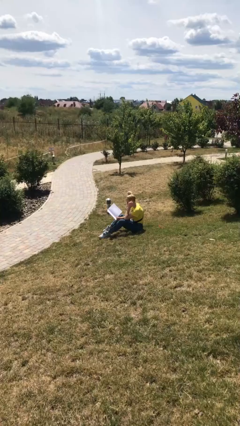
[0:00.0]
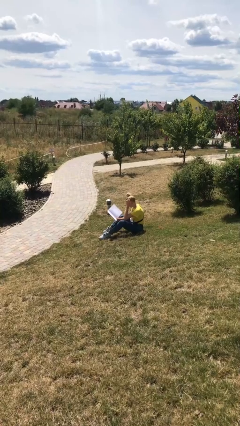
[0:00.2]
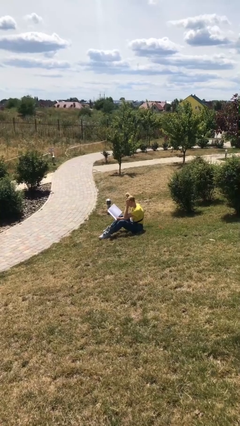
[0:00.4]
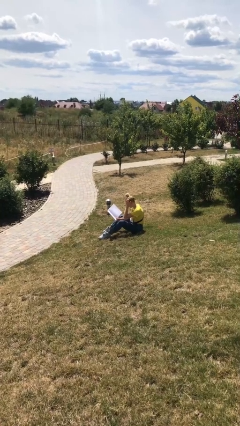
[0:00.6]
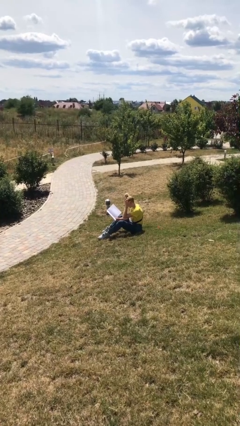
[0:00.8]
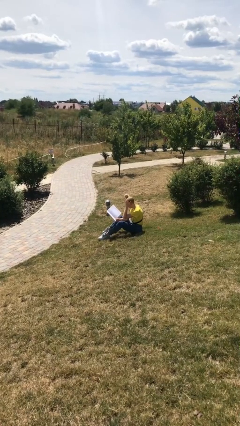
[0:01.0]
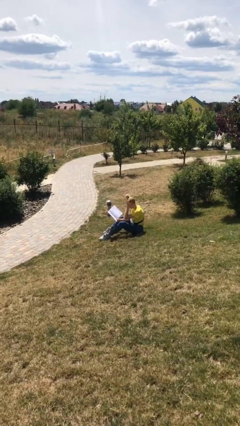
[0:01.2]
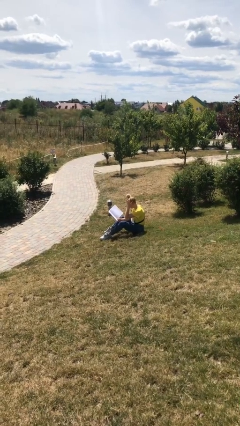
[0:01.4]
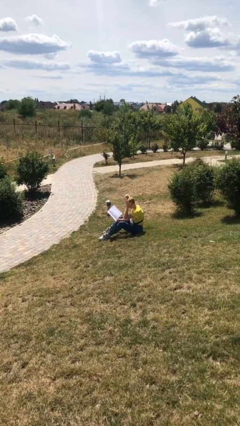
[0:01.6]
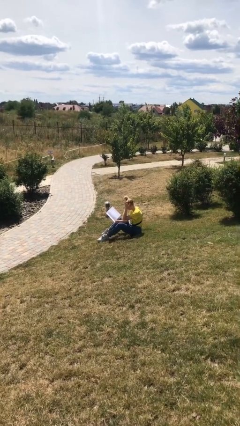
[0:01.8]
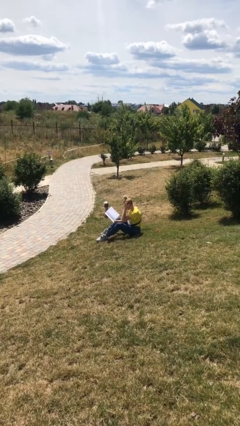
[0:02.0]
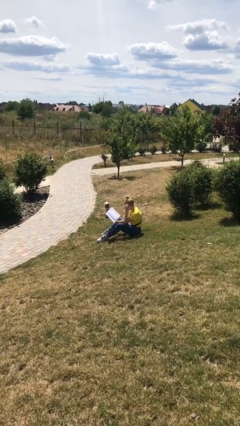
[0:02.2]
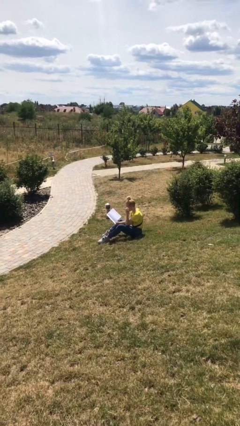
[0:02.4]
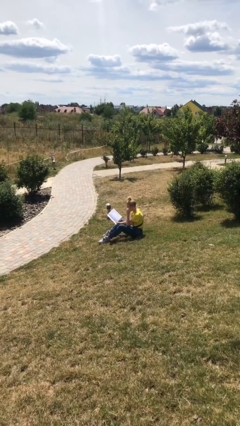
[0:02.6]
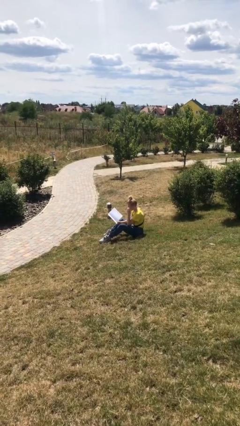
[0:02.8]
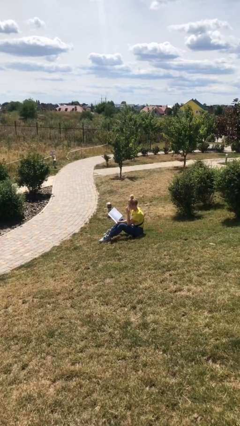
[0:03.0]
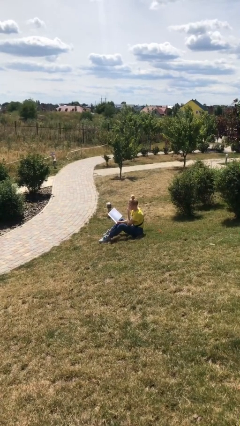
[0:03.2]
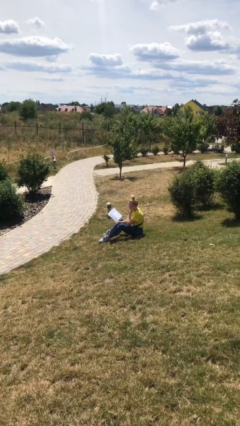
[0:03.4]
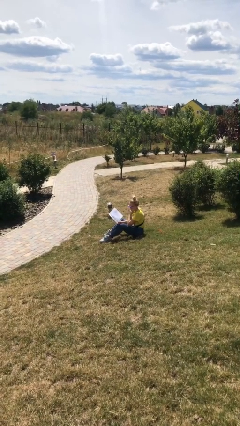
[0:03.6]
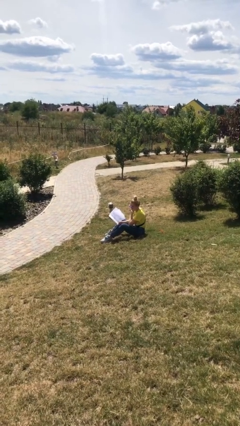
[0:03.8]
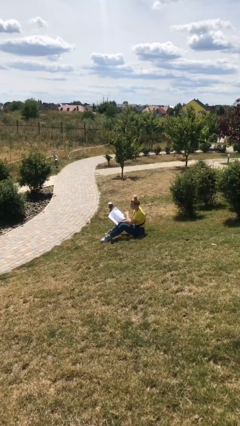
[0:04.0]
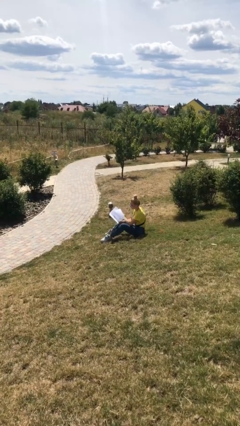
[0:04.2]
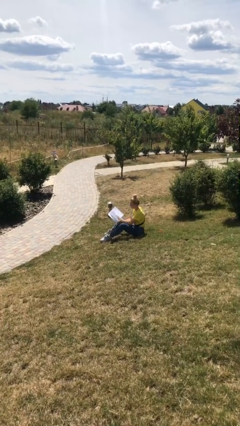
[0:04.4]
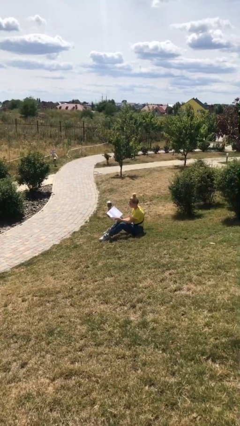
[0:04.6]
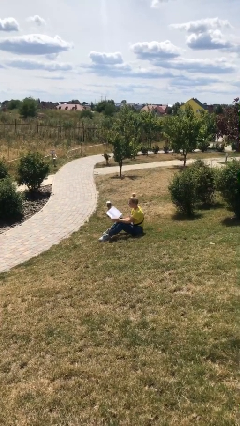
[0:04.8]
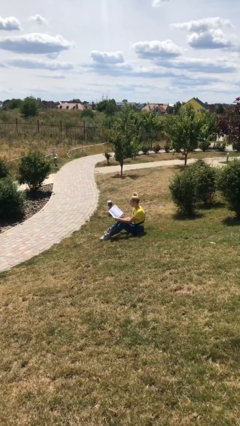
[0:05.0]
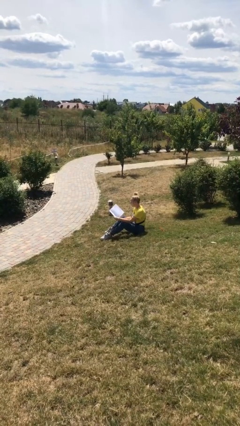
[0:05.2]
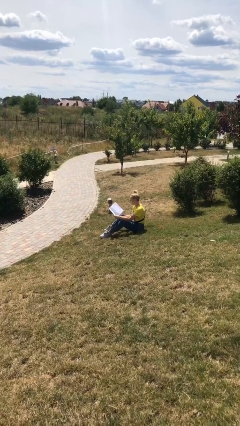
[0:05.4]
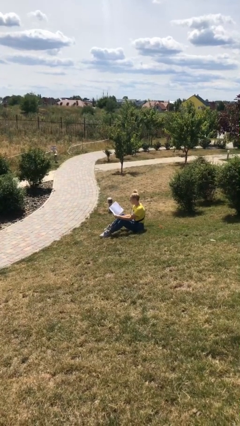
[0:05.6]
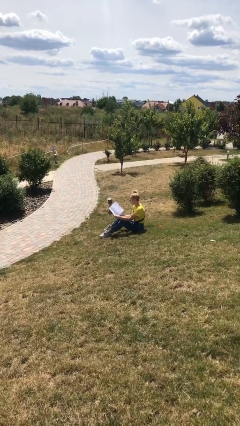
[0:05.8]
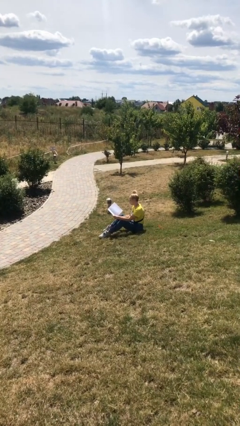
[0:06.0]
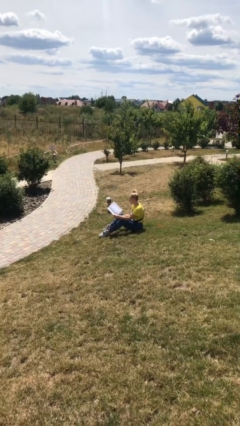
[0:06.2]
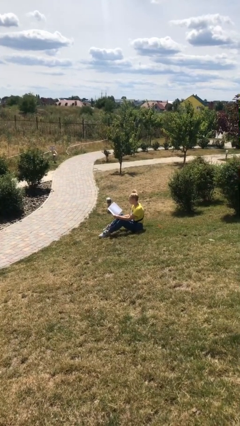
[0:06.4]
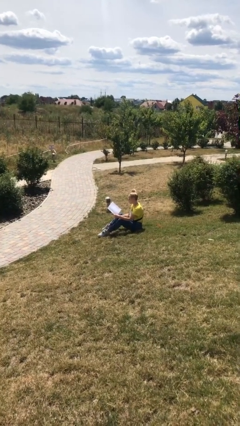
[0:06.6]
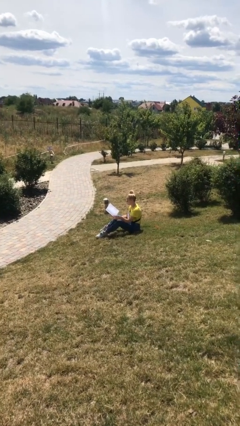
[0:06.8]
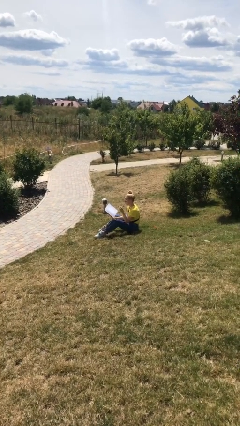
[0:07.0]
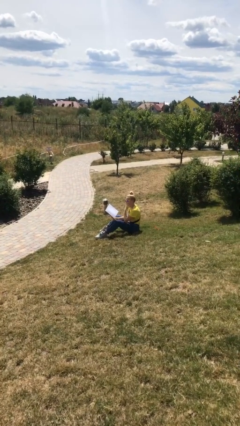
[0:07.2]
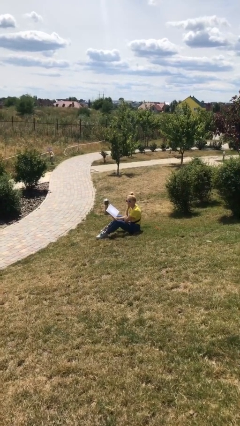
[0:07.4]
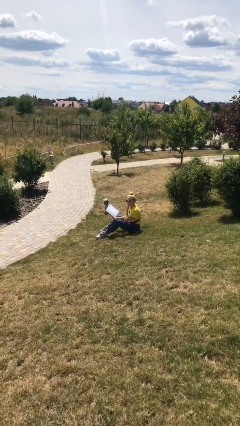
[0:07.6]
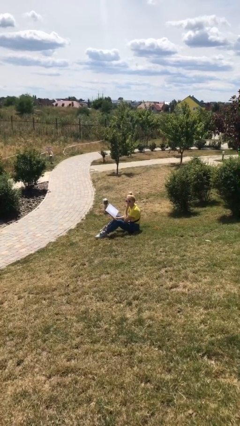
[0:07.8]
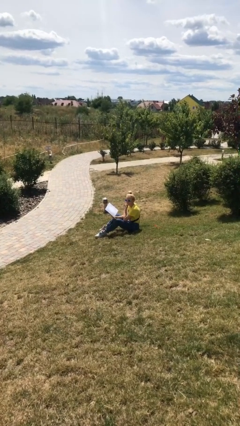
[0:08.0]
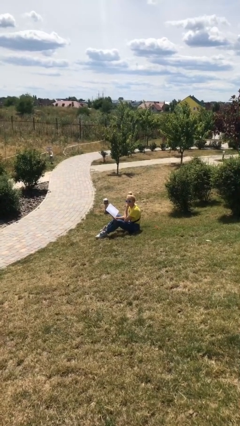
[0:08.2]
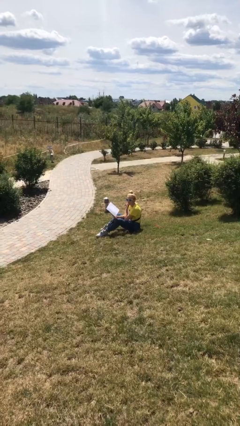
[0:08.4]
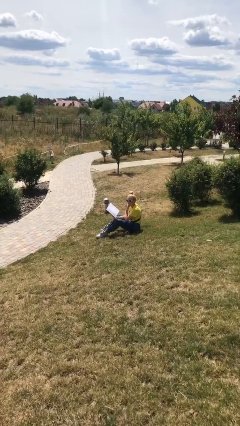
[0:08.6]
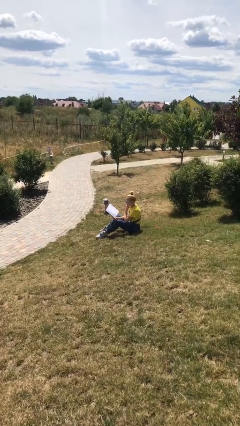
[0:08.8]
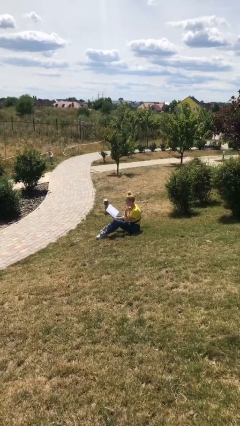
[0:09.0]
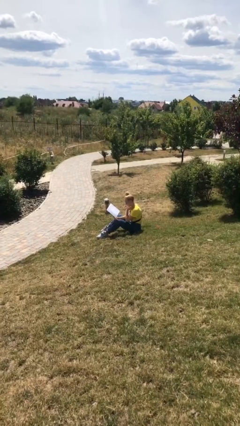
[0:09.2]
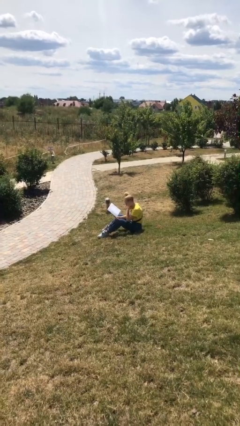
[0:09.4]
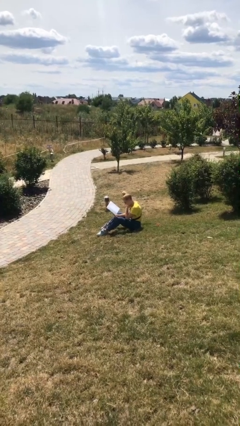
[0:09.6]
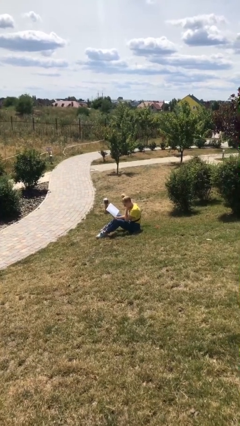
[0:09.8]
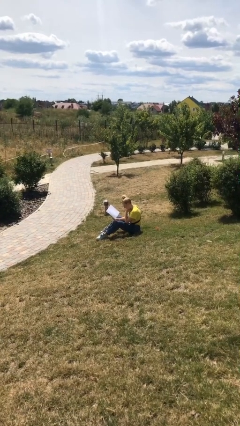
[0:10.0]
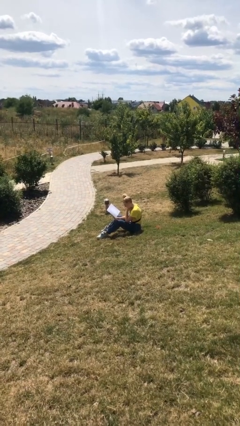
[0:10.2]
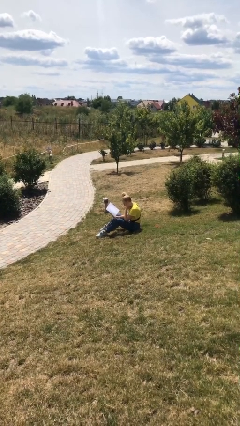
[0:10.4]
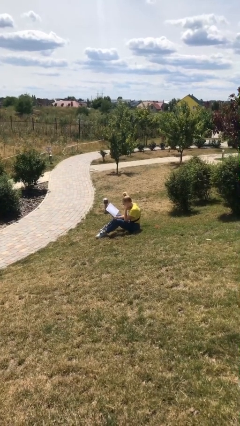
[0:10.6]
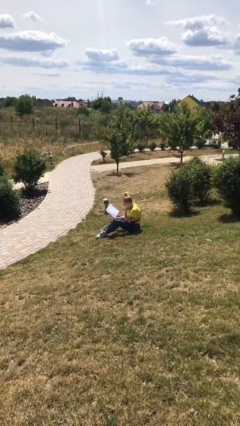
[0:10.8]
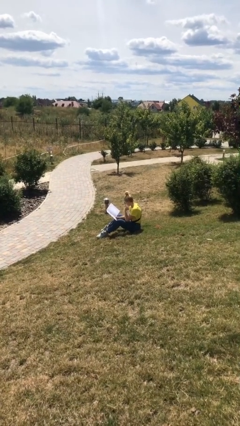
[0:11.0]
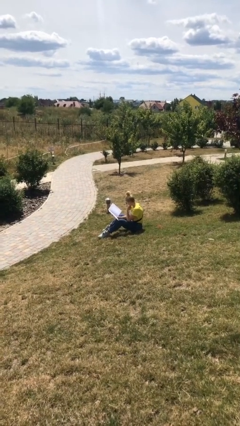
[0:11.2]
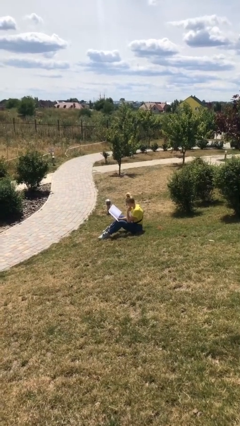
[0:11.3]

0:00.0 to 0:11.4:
person reads document

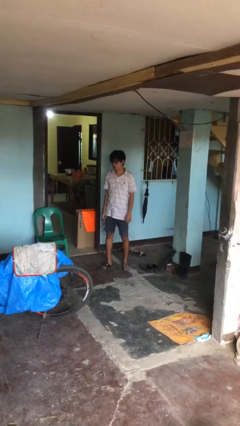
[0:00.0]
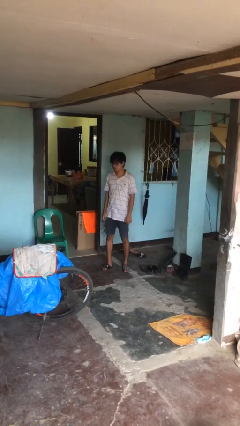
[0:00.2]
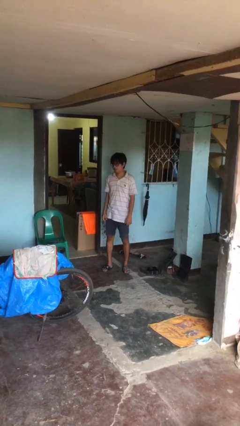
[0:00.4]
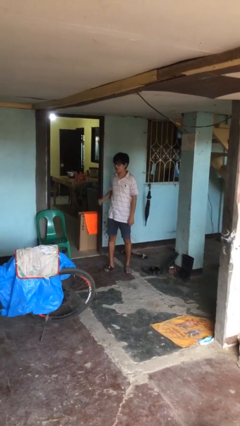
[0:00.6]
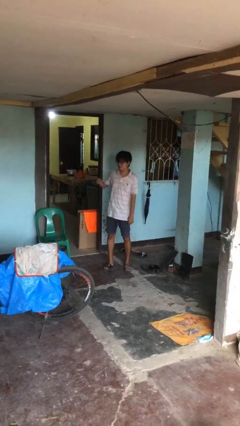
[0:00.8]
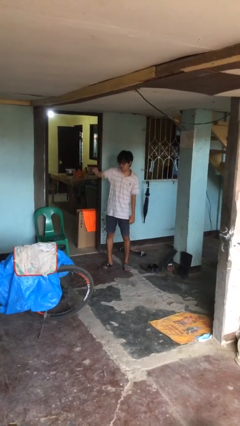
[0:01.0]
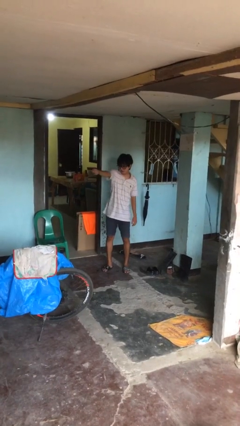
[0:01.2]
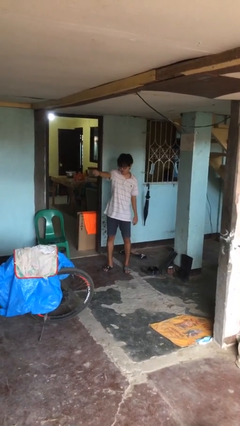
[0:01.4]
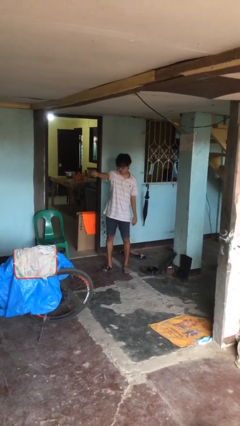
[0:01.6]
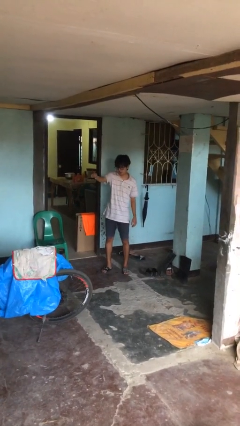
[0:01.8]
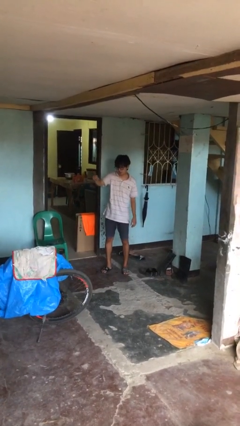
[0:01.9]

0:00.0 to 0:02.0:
person punches

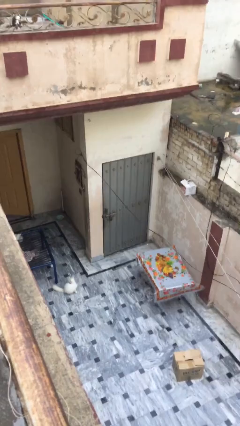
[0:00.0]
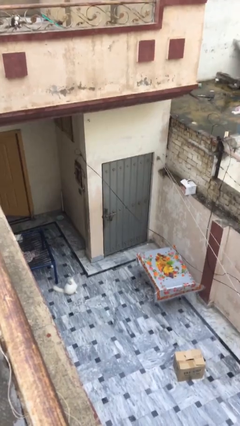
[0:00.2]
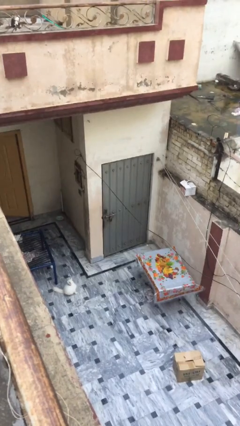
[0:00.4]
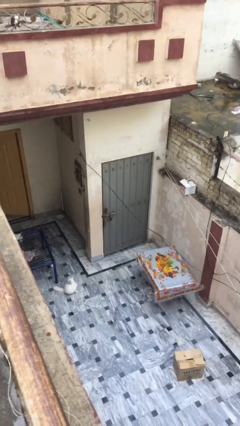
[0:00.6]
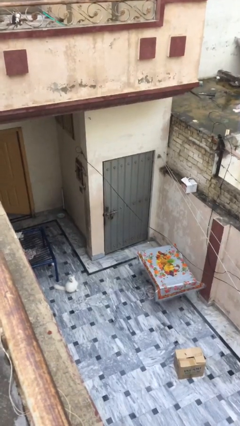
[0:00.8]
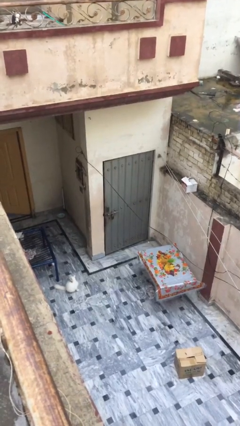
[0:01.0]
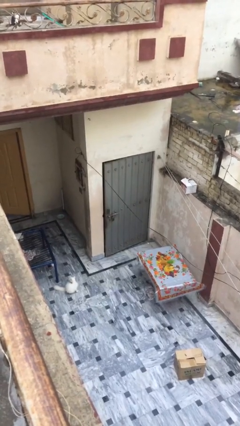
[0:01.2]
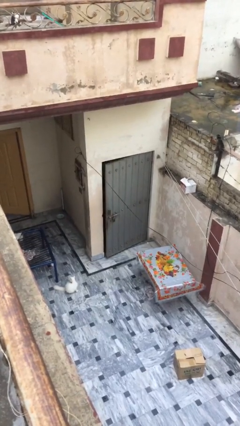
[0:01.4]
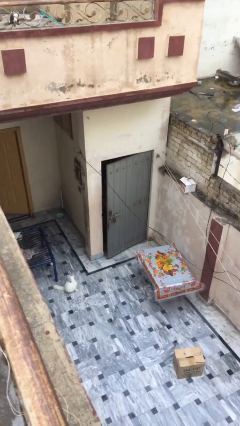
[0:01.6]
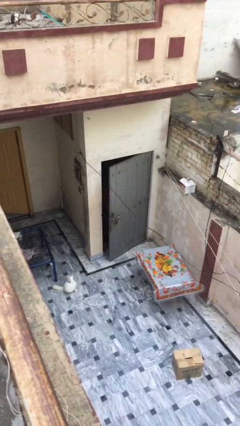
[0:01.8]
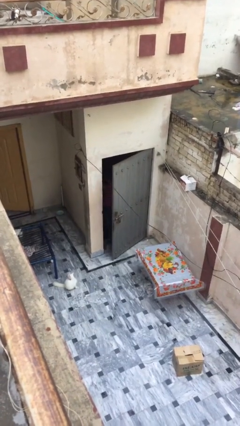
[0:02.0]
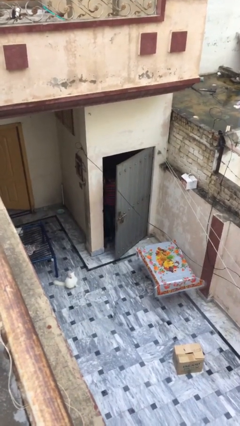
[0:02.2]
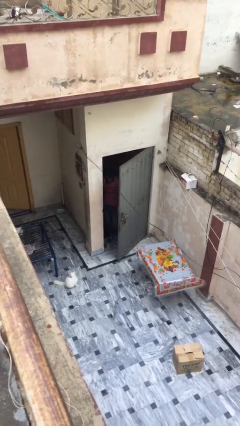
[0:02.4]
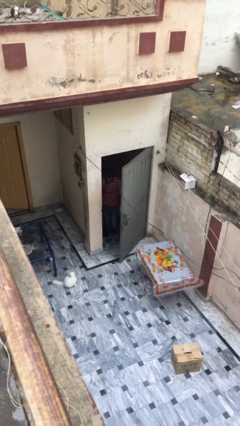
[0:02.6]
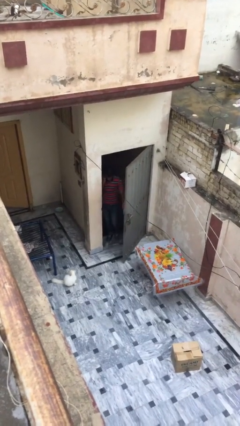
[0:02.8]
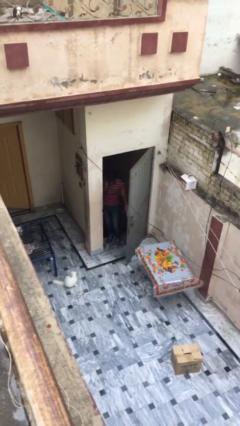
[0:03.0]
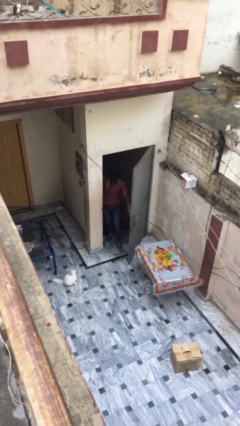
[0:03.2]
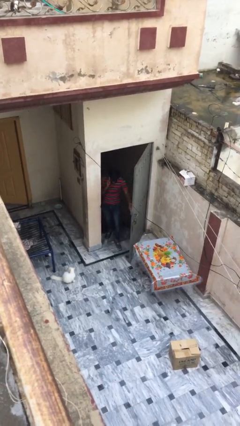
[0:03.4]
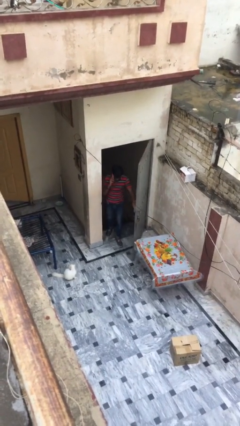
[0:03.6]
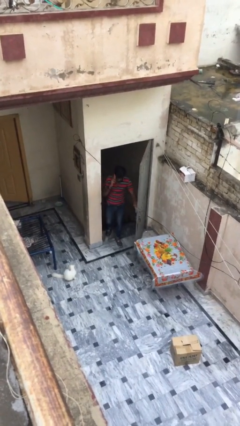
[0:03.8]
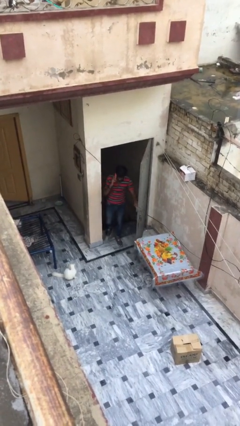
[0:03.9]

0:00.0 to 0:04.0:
person opens facility door

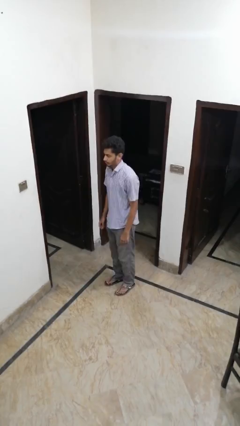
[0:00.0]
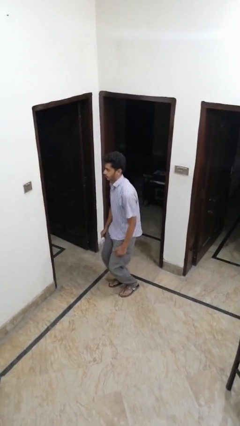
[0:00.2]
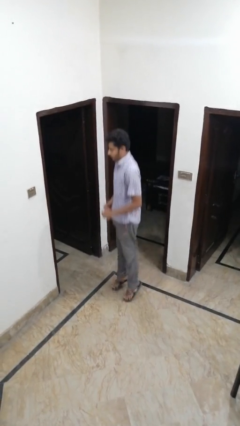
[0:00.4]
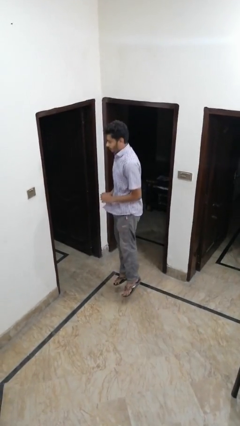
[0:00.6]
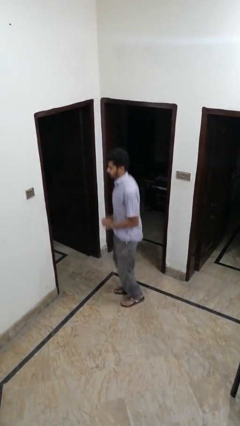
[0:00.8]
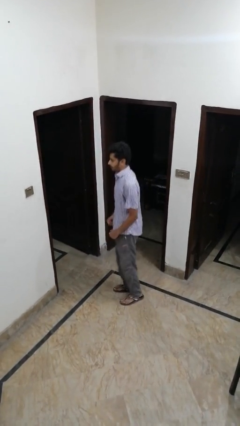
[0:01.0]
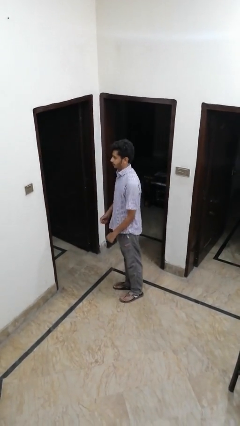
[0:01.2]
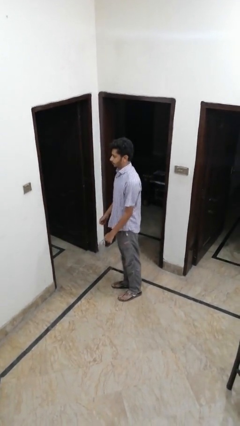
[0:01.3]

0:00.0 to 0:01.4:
person jumps
